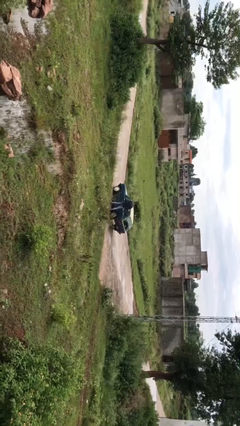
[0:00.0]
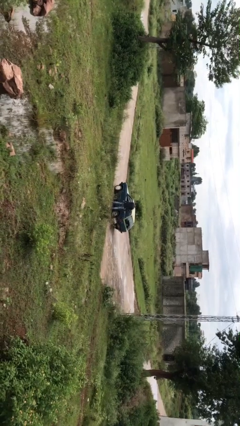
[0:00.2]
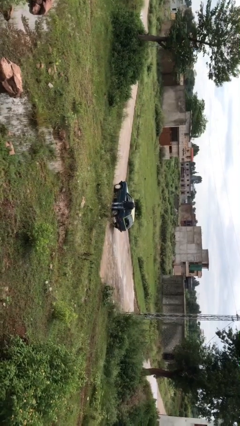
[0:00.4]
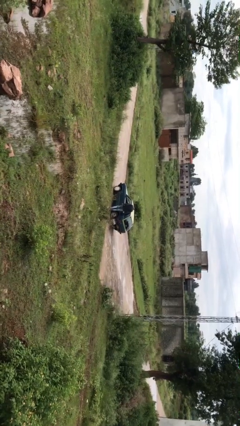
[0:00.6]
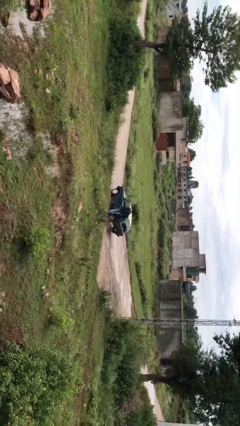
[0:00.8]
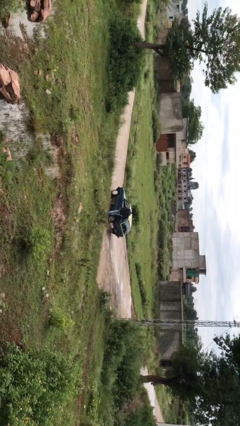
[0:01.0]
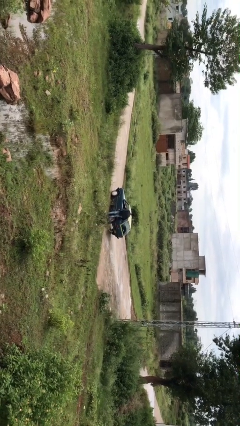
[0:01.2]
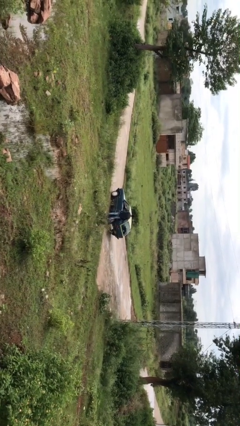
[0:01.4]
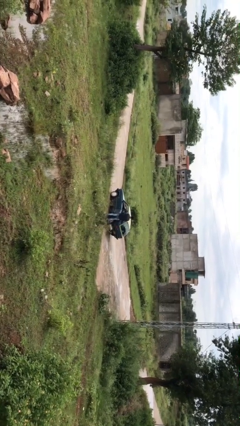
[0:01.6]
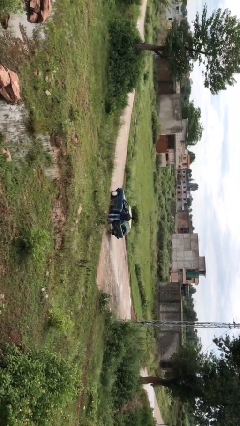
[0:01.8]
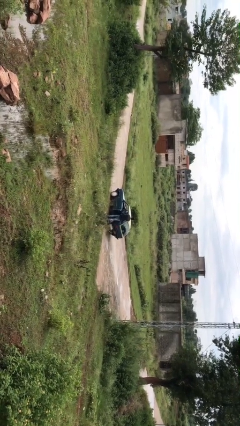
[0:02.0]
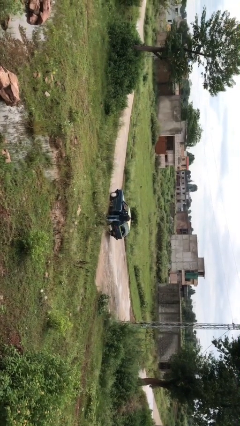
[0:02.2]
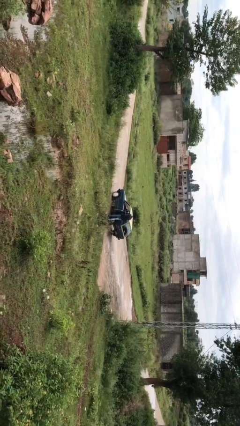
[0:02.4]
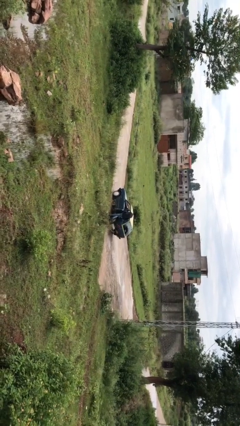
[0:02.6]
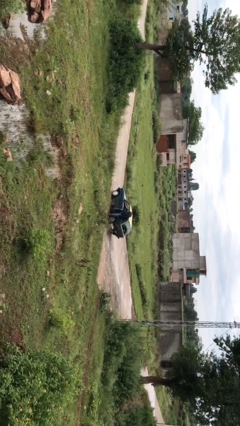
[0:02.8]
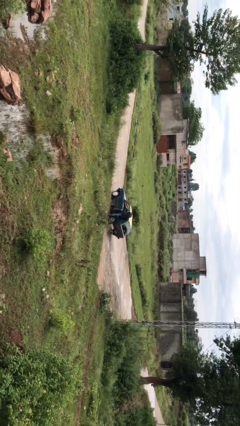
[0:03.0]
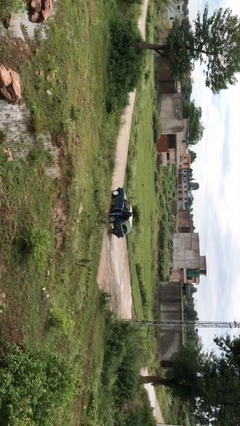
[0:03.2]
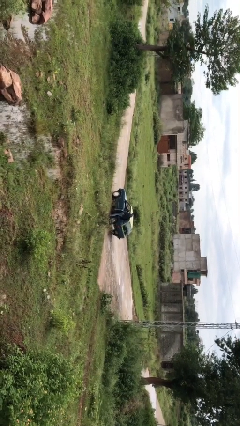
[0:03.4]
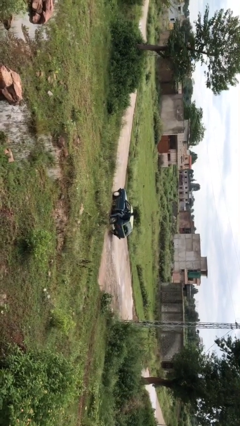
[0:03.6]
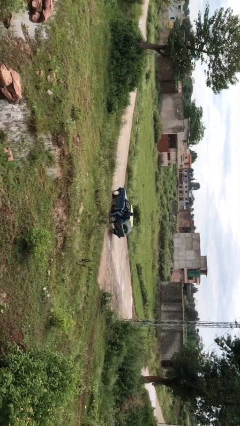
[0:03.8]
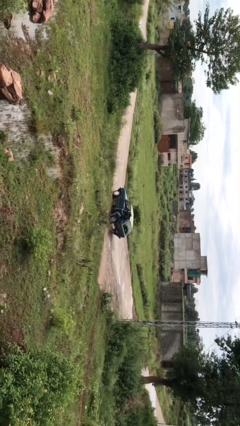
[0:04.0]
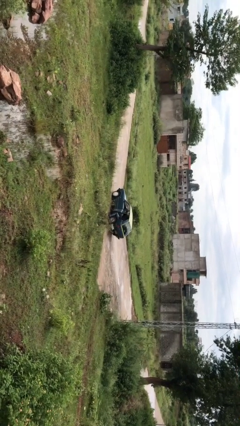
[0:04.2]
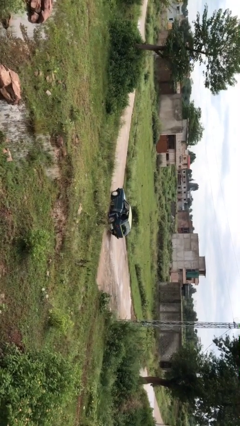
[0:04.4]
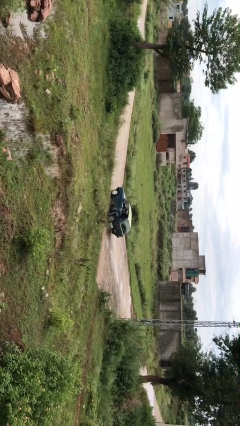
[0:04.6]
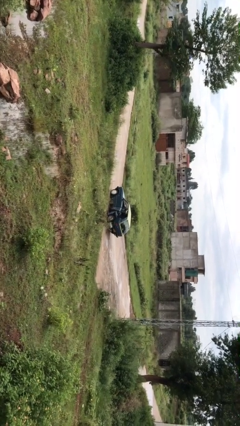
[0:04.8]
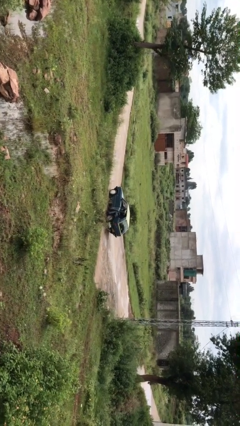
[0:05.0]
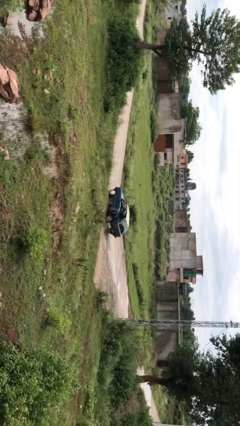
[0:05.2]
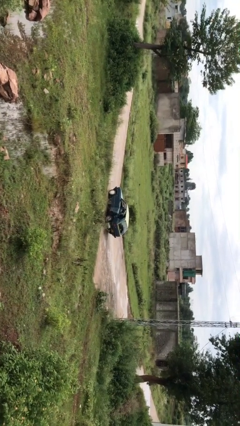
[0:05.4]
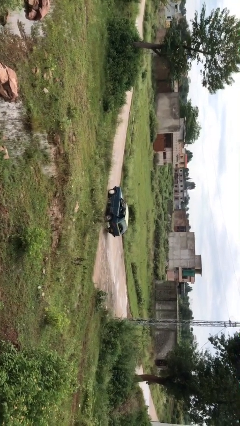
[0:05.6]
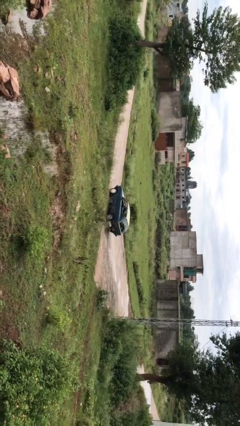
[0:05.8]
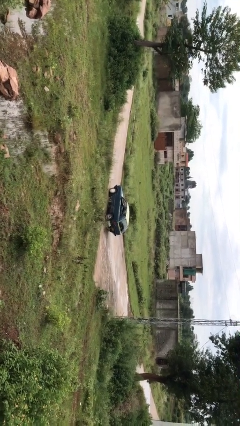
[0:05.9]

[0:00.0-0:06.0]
car picks up person

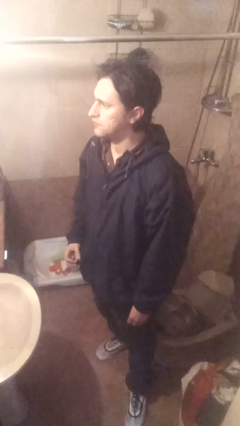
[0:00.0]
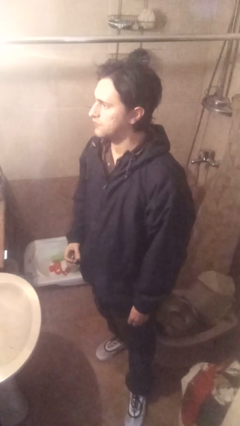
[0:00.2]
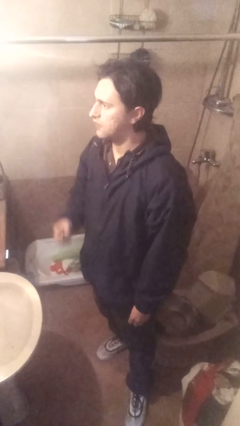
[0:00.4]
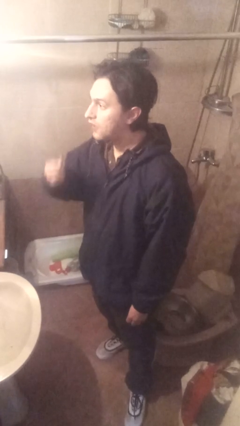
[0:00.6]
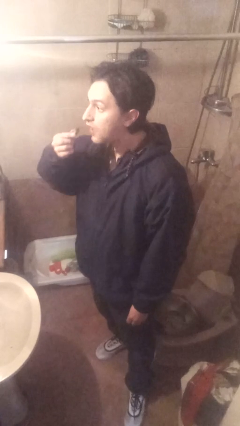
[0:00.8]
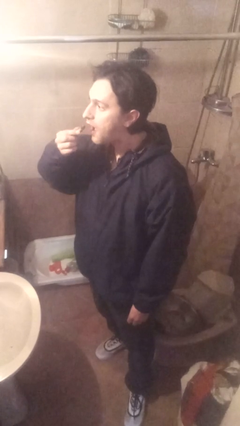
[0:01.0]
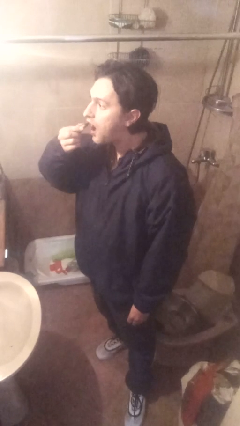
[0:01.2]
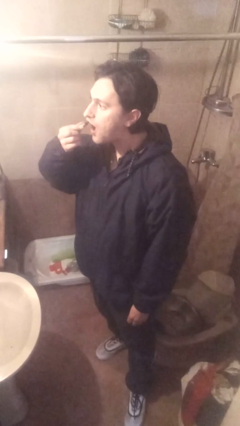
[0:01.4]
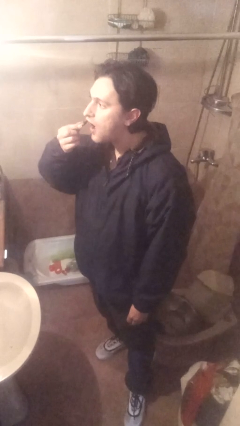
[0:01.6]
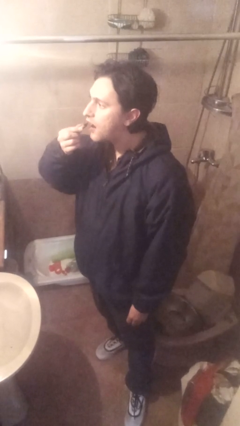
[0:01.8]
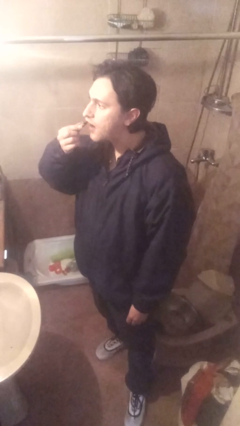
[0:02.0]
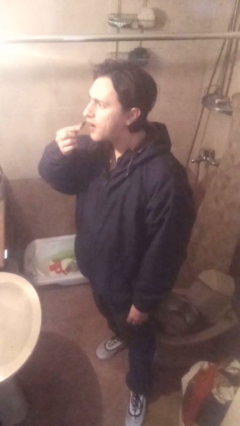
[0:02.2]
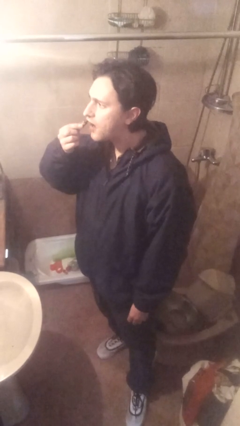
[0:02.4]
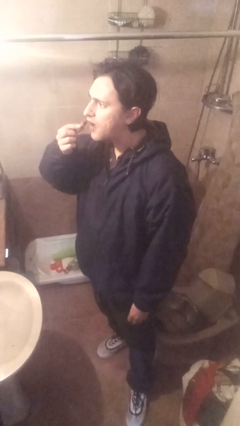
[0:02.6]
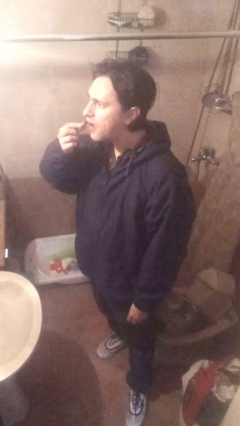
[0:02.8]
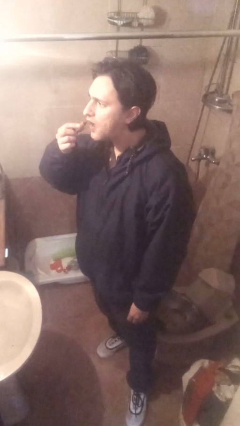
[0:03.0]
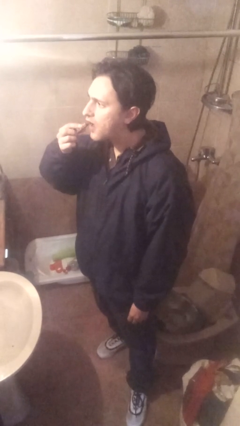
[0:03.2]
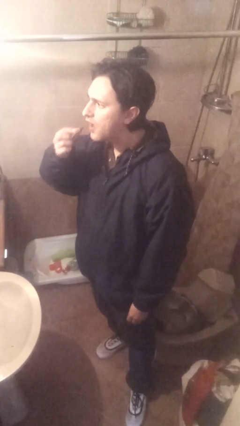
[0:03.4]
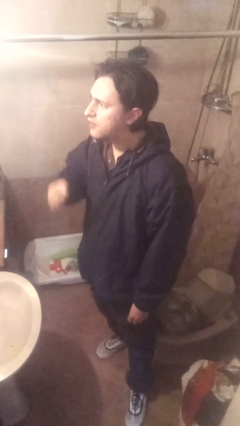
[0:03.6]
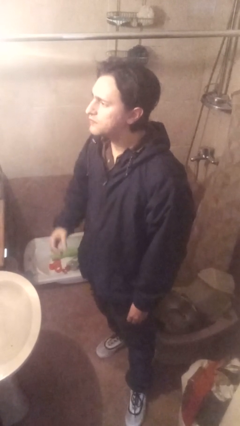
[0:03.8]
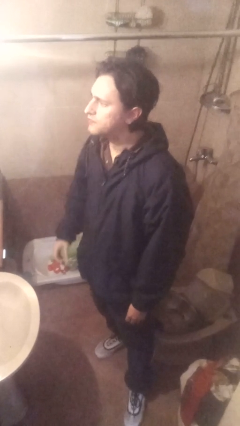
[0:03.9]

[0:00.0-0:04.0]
person applies lip makeup

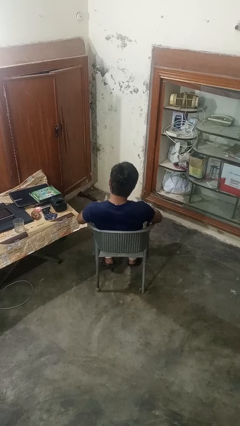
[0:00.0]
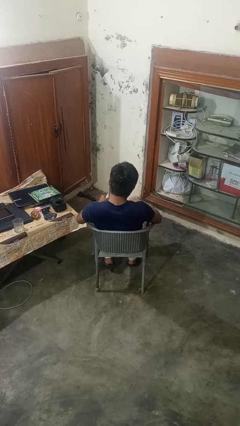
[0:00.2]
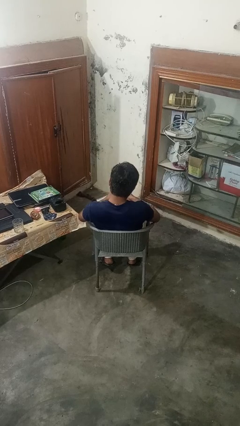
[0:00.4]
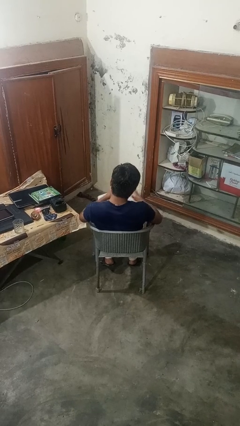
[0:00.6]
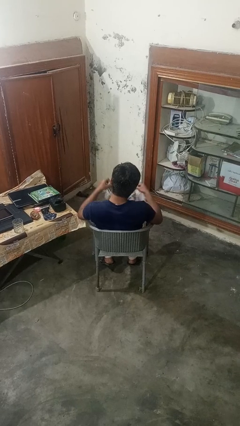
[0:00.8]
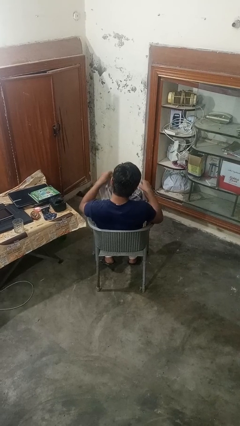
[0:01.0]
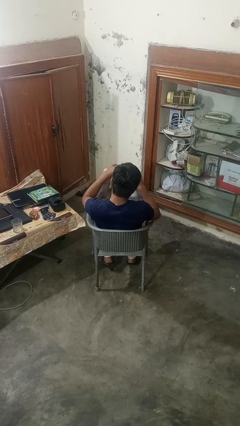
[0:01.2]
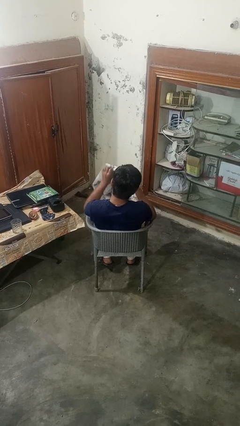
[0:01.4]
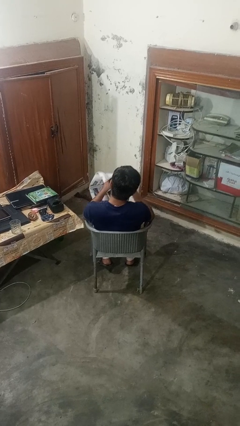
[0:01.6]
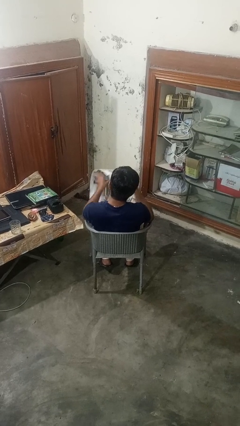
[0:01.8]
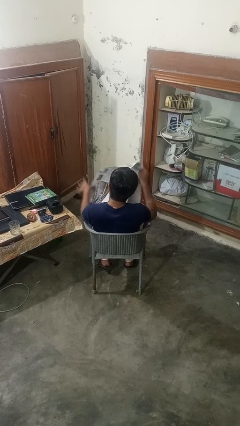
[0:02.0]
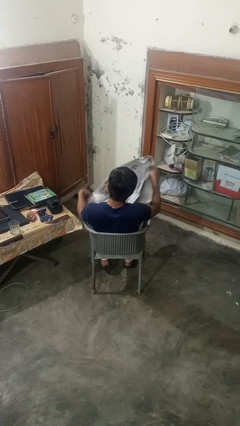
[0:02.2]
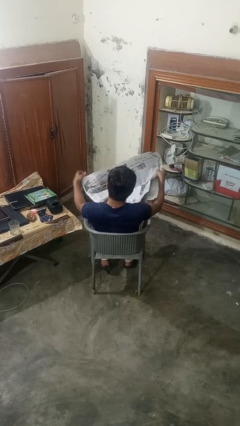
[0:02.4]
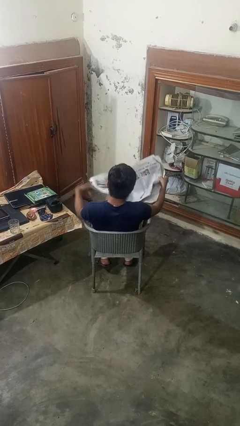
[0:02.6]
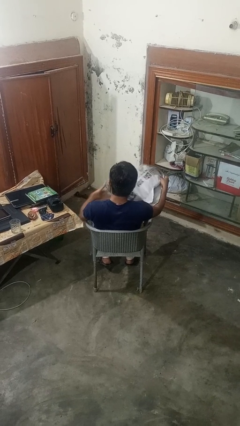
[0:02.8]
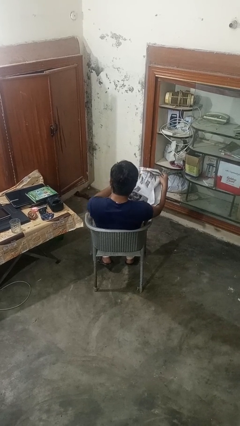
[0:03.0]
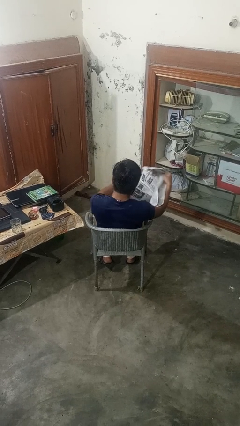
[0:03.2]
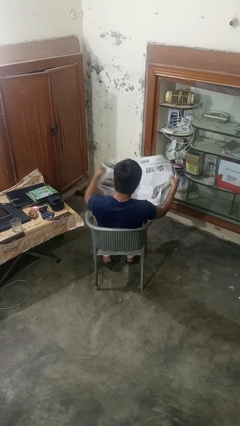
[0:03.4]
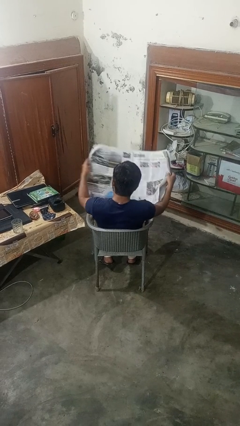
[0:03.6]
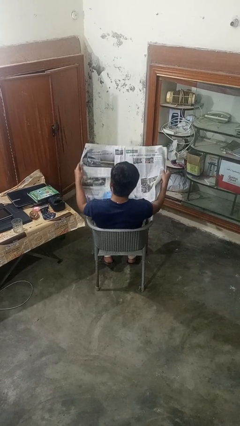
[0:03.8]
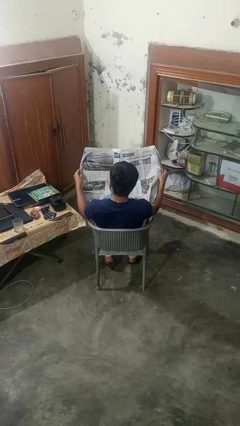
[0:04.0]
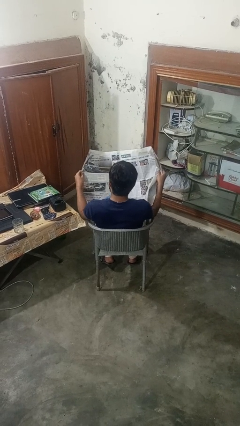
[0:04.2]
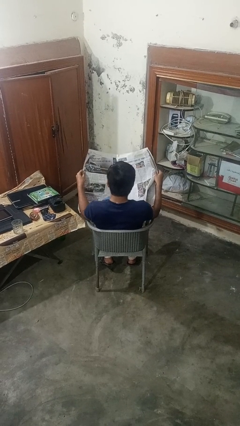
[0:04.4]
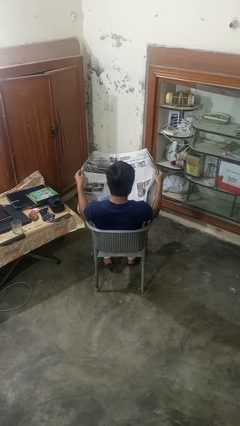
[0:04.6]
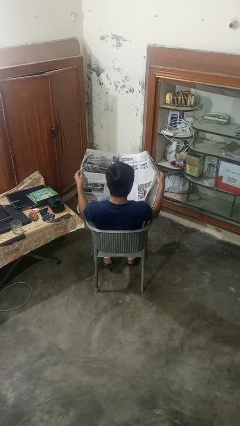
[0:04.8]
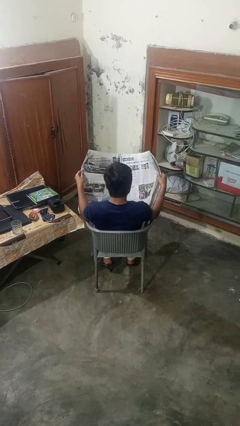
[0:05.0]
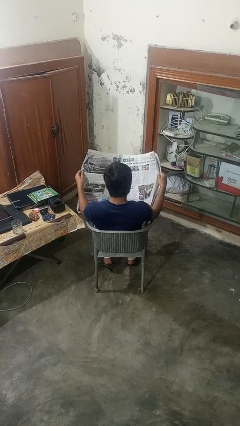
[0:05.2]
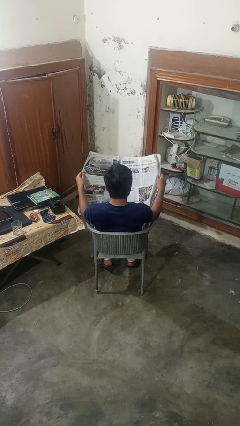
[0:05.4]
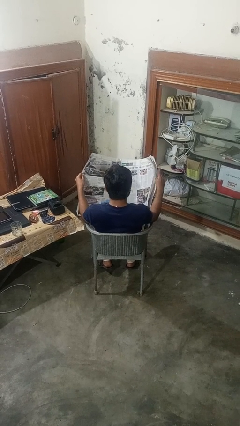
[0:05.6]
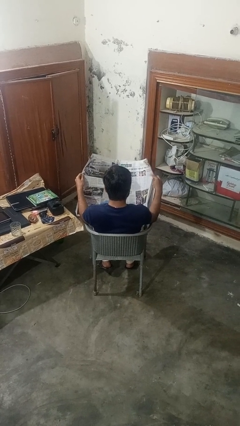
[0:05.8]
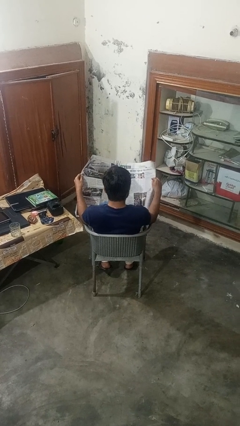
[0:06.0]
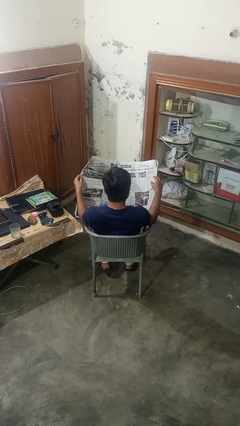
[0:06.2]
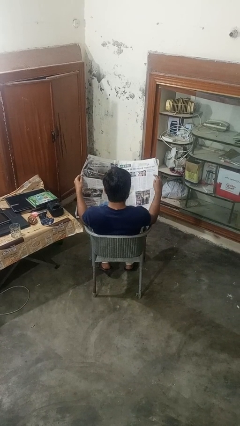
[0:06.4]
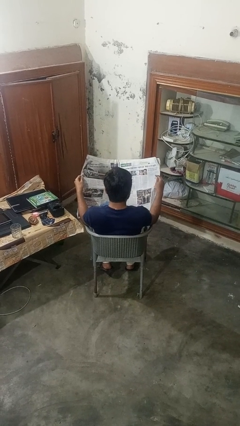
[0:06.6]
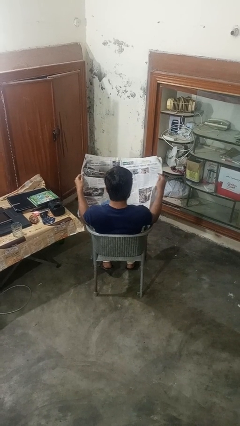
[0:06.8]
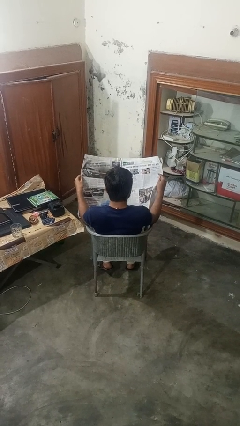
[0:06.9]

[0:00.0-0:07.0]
person reads newspaper

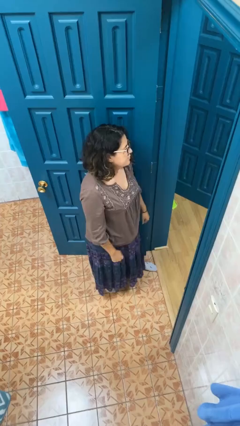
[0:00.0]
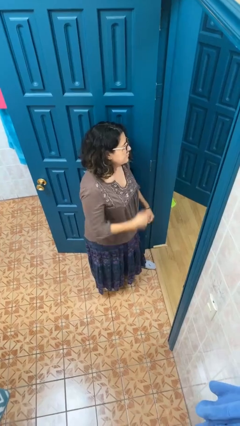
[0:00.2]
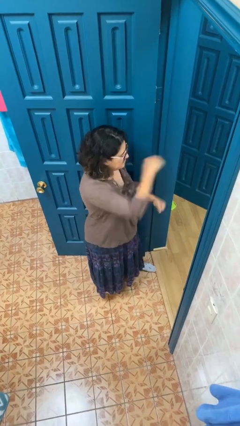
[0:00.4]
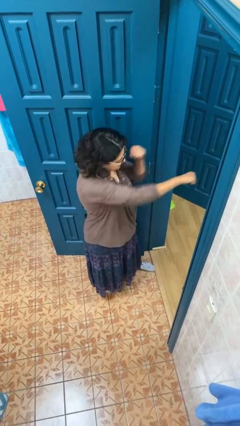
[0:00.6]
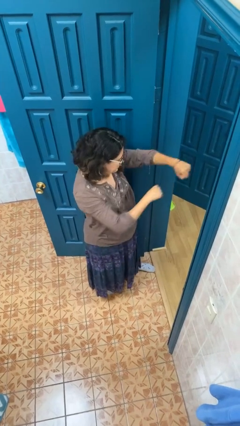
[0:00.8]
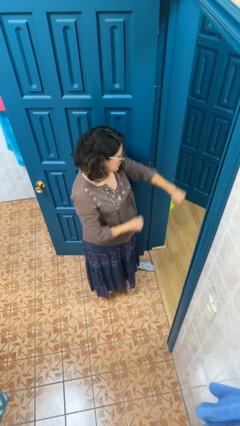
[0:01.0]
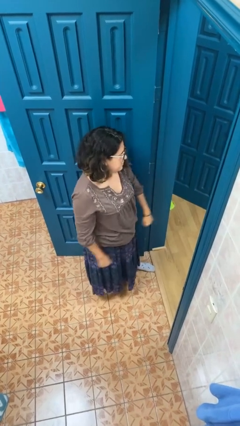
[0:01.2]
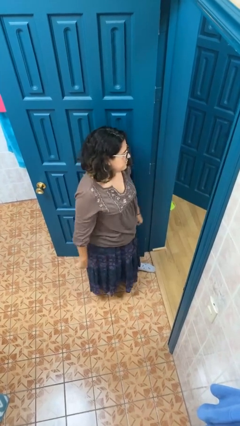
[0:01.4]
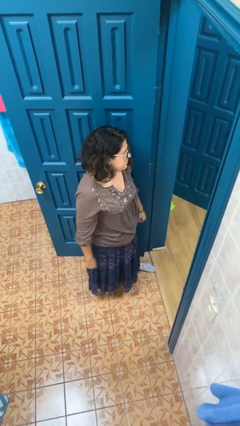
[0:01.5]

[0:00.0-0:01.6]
person punches
